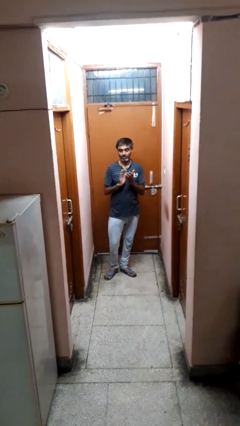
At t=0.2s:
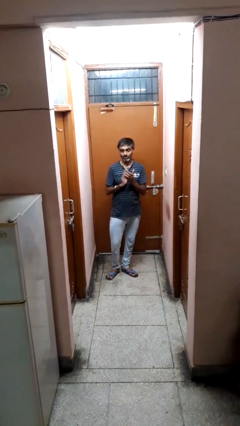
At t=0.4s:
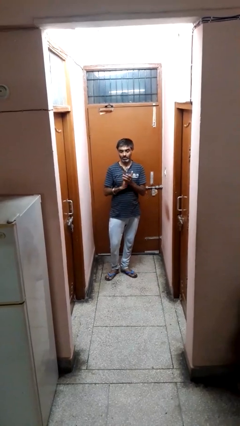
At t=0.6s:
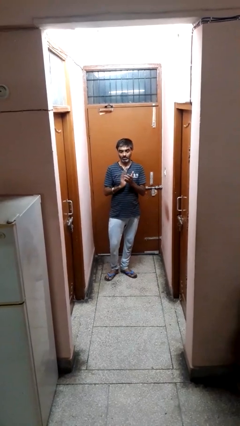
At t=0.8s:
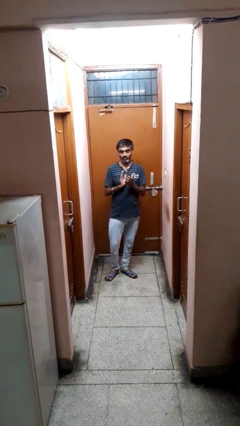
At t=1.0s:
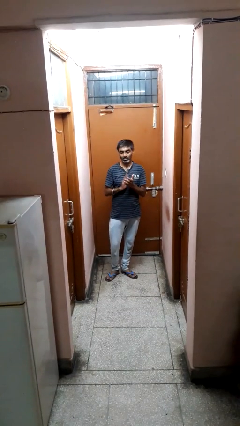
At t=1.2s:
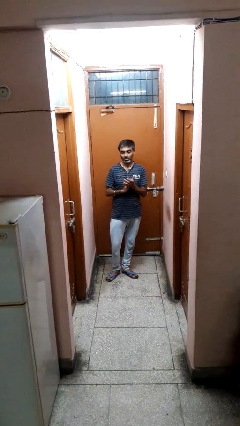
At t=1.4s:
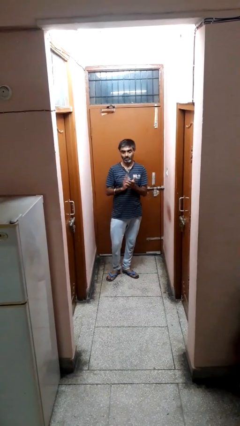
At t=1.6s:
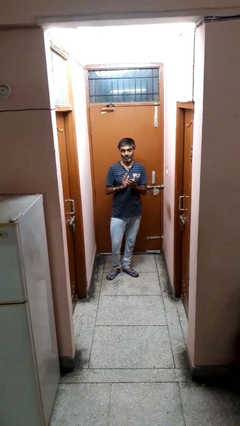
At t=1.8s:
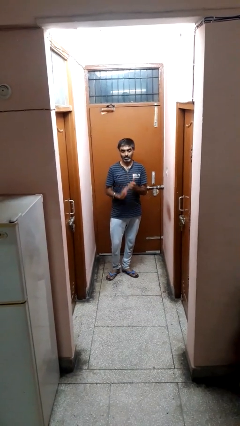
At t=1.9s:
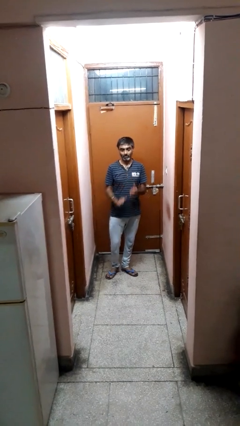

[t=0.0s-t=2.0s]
person claps hands

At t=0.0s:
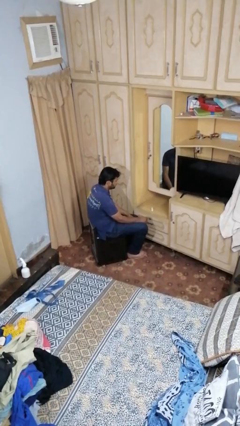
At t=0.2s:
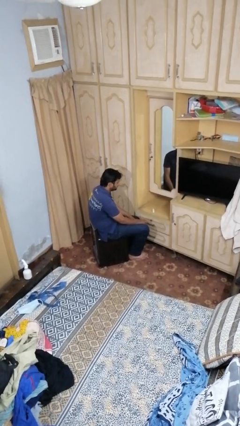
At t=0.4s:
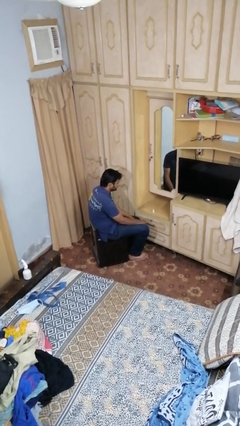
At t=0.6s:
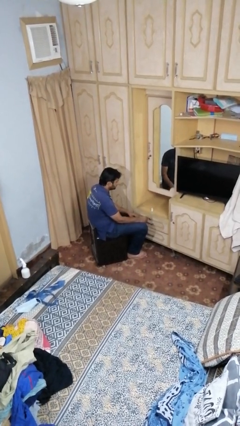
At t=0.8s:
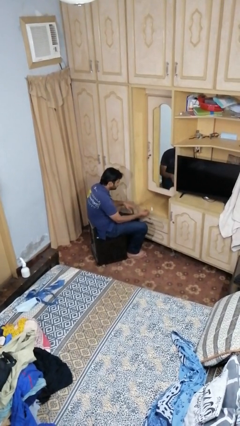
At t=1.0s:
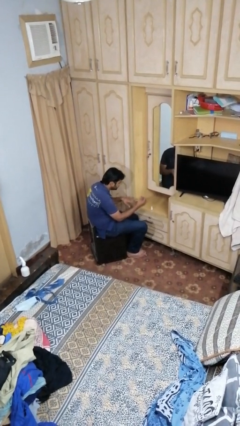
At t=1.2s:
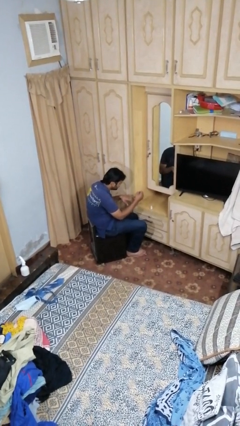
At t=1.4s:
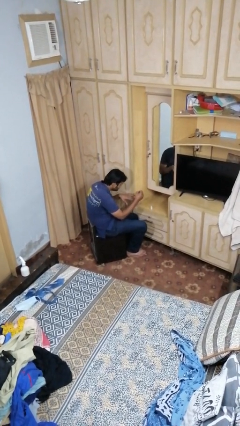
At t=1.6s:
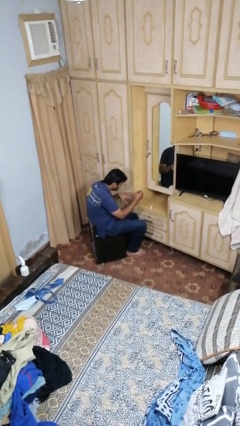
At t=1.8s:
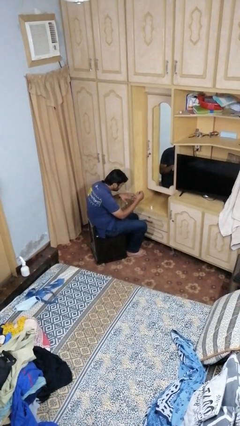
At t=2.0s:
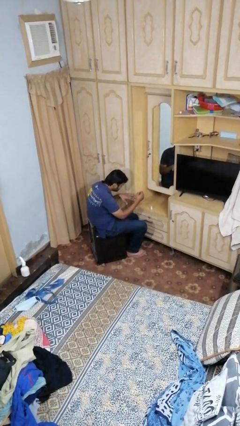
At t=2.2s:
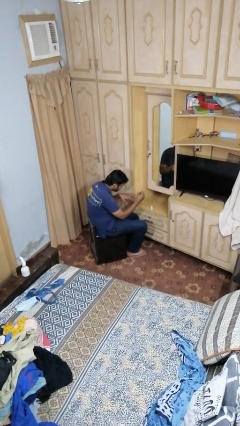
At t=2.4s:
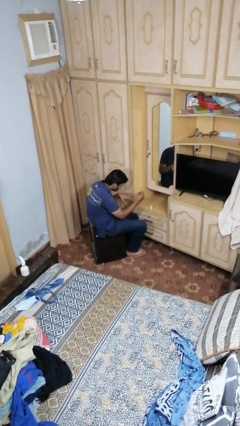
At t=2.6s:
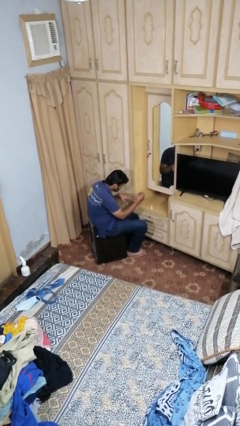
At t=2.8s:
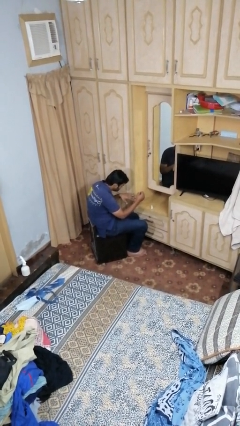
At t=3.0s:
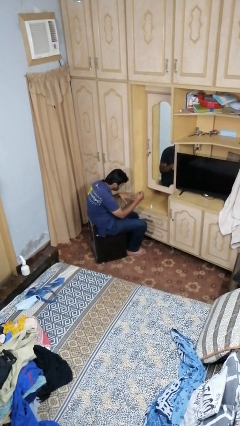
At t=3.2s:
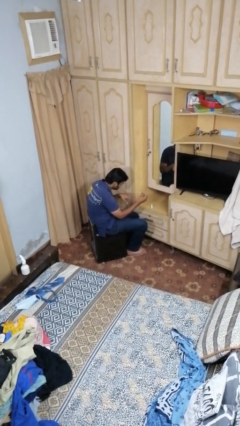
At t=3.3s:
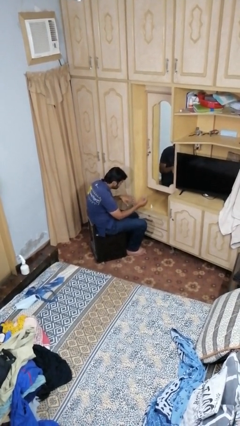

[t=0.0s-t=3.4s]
person paints fingernails

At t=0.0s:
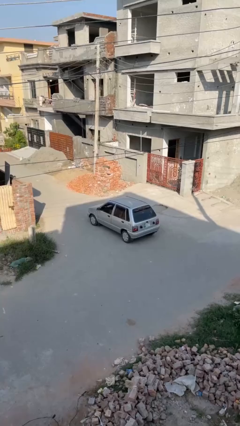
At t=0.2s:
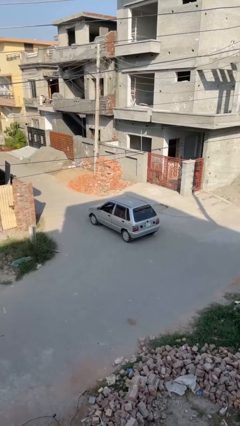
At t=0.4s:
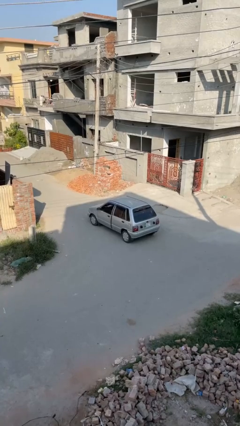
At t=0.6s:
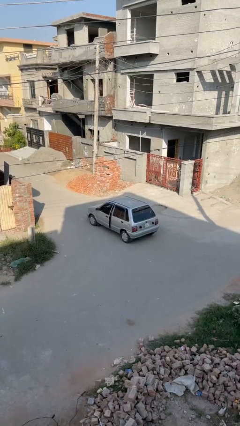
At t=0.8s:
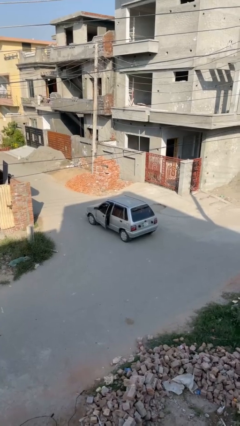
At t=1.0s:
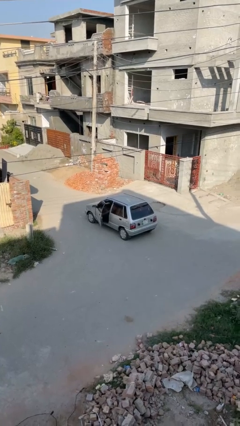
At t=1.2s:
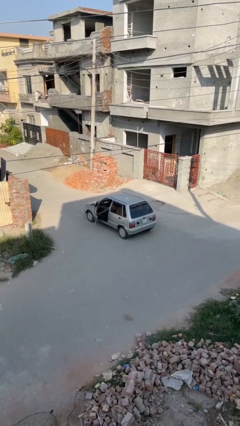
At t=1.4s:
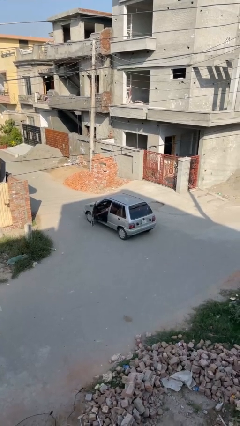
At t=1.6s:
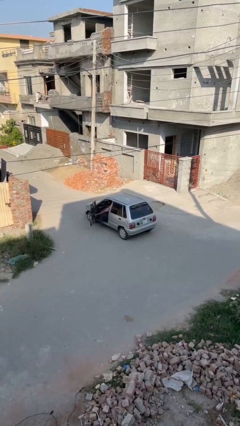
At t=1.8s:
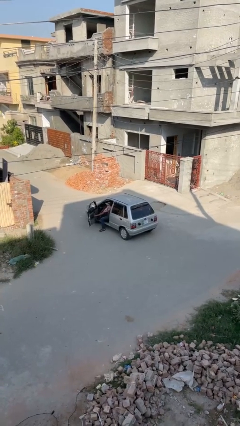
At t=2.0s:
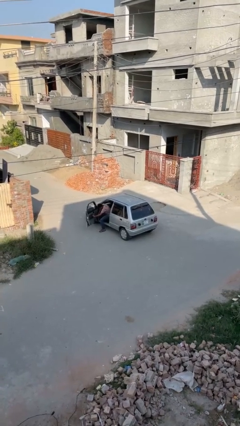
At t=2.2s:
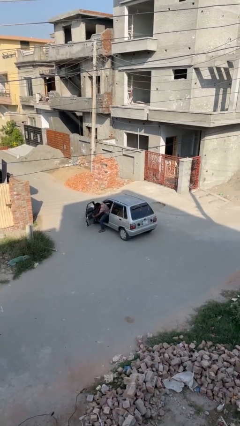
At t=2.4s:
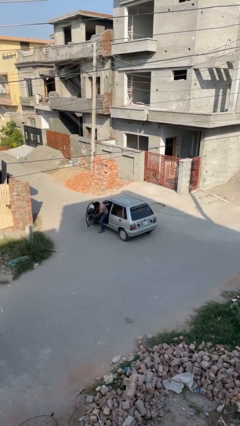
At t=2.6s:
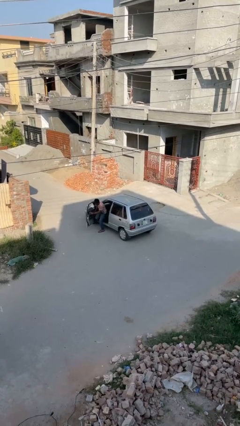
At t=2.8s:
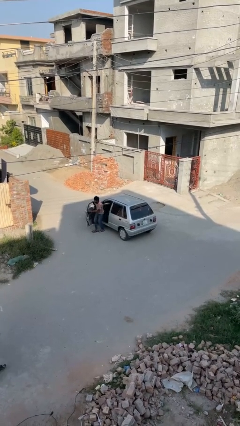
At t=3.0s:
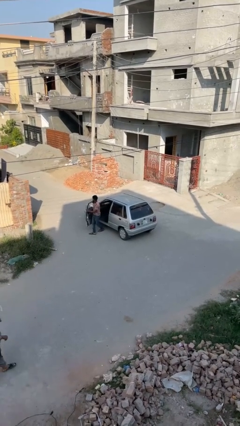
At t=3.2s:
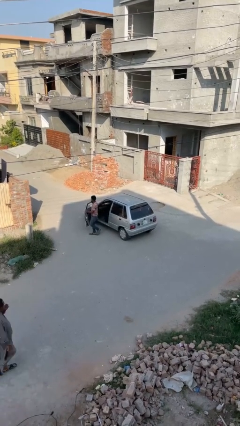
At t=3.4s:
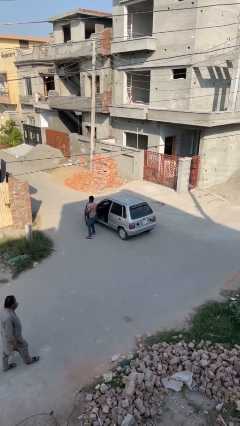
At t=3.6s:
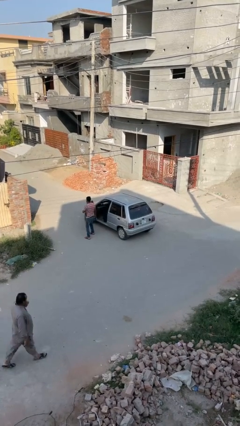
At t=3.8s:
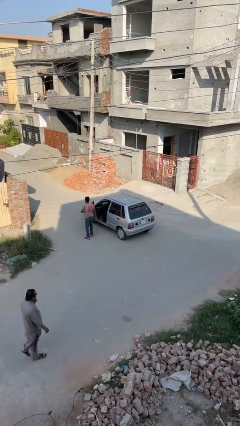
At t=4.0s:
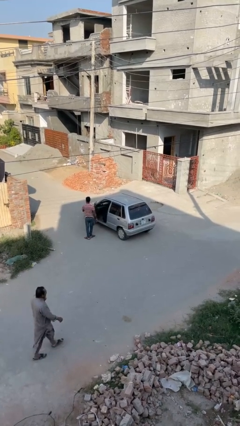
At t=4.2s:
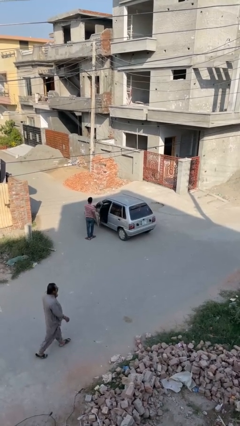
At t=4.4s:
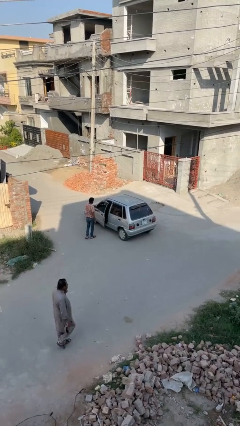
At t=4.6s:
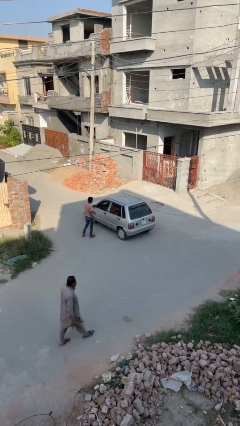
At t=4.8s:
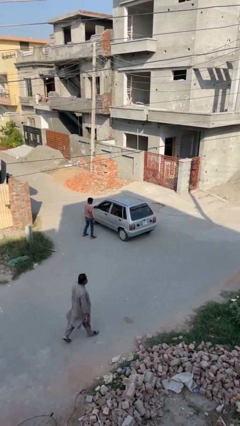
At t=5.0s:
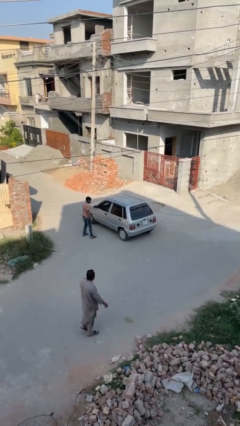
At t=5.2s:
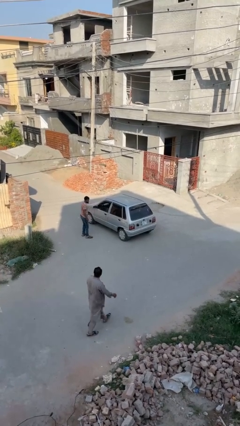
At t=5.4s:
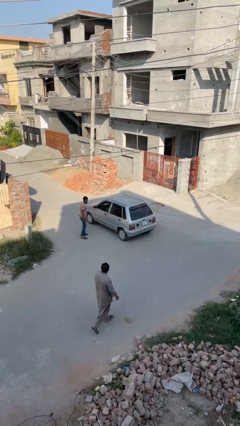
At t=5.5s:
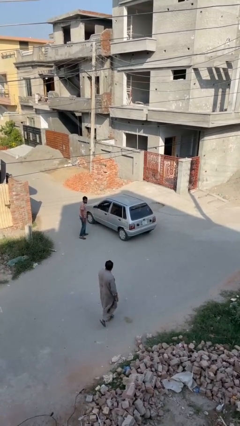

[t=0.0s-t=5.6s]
car drops off person

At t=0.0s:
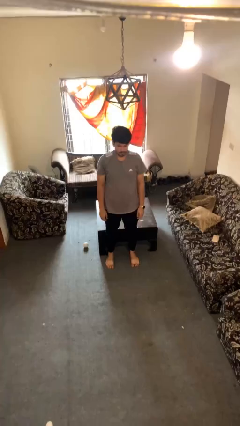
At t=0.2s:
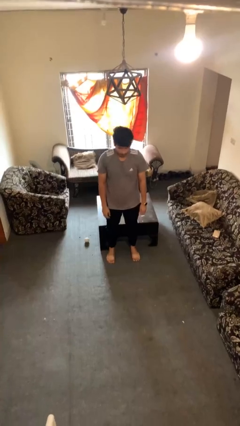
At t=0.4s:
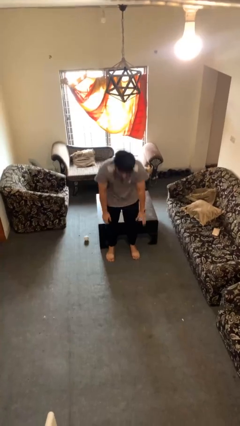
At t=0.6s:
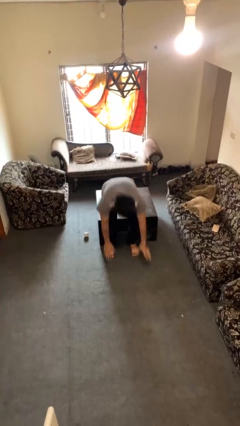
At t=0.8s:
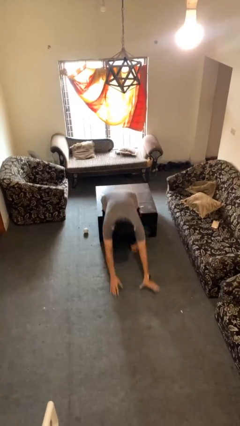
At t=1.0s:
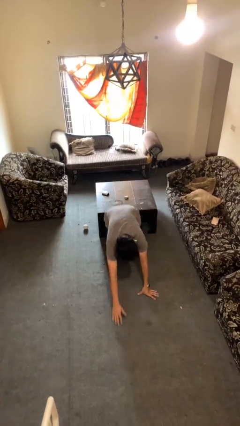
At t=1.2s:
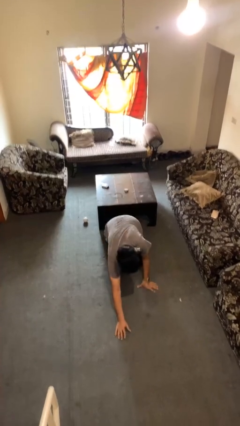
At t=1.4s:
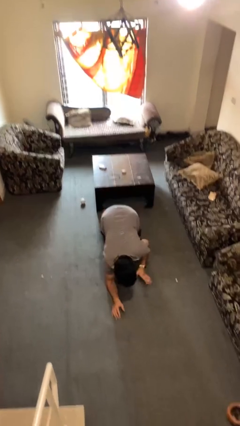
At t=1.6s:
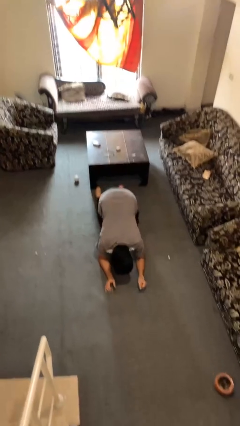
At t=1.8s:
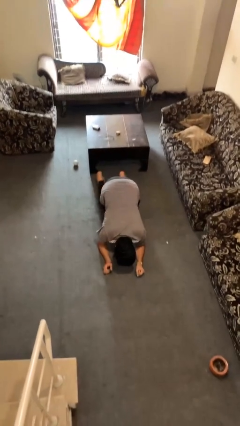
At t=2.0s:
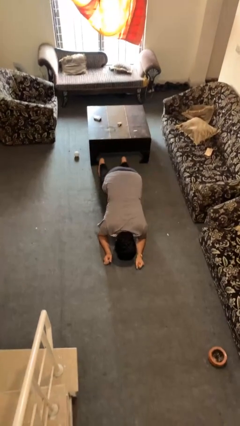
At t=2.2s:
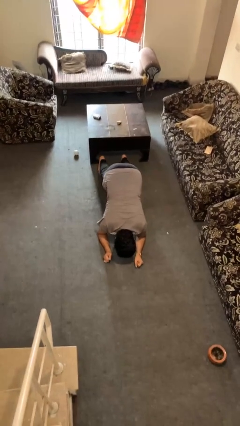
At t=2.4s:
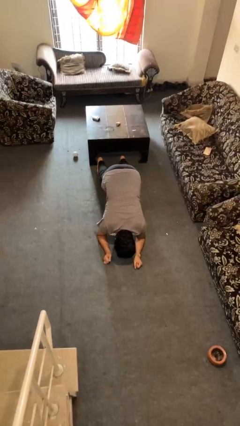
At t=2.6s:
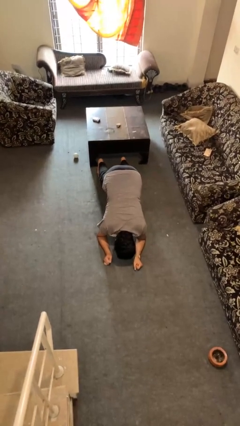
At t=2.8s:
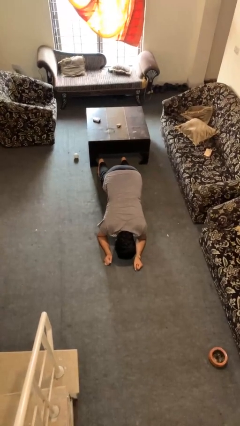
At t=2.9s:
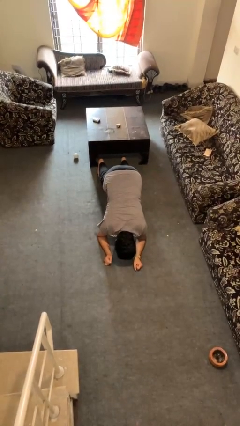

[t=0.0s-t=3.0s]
person exercises with plank

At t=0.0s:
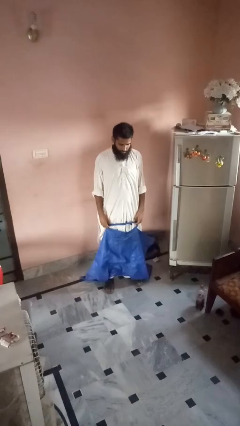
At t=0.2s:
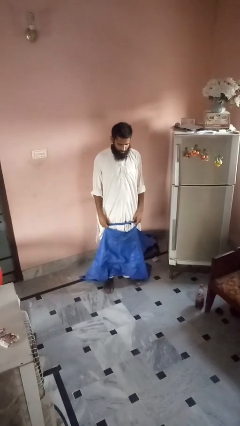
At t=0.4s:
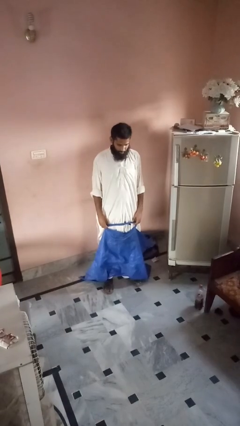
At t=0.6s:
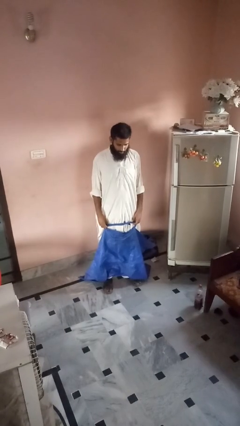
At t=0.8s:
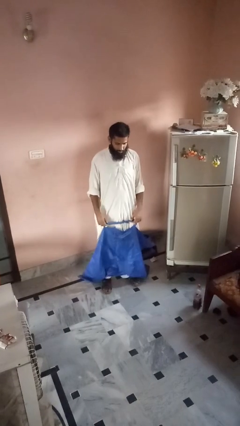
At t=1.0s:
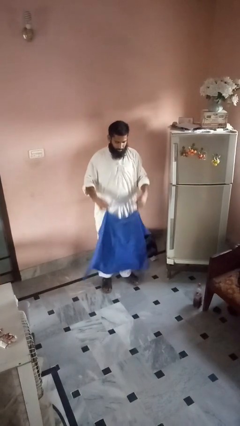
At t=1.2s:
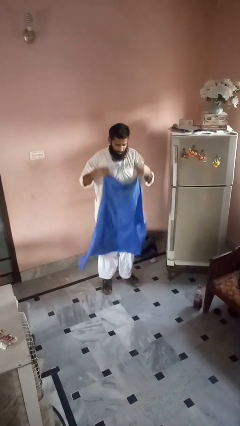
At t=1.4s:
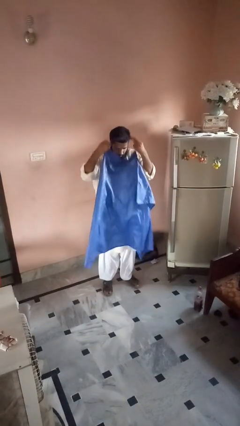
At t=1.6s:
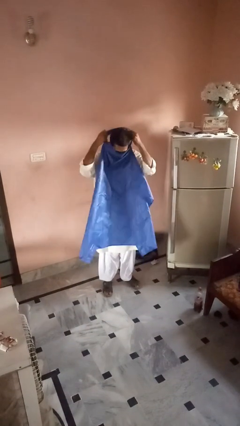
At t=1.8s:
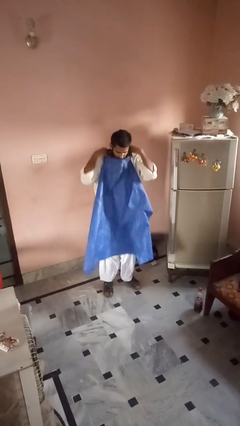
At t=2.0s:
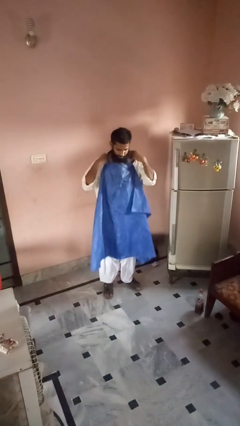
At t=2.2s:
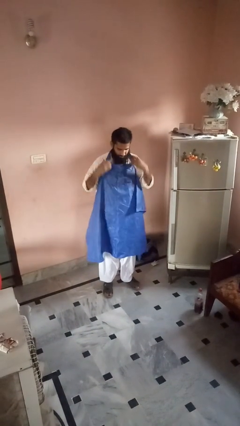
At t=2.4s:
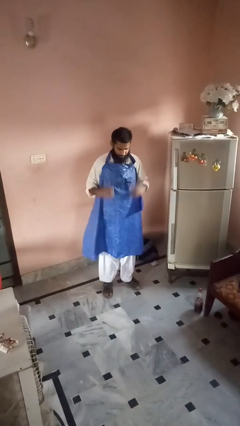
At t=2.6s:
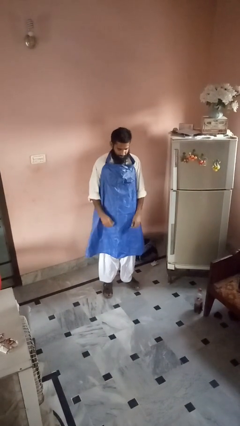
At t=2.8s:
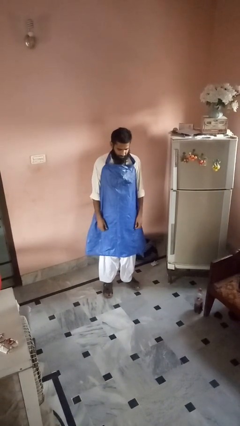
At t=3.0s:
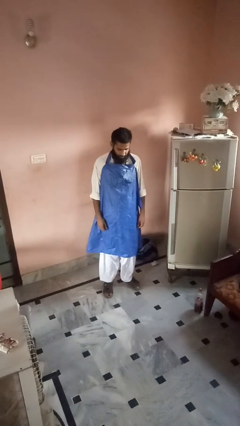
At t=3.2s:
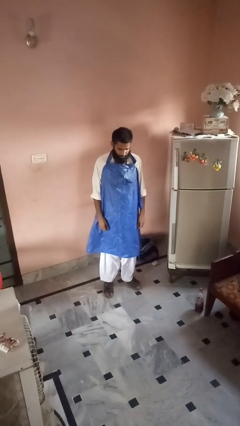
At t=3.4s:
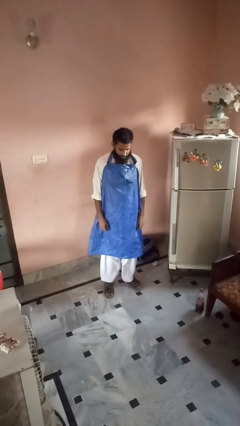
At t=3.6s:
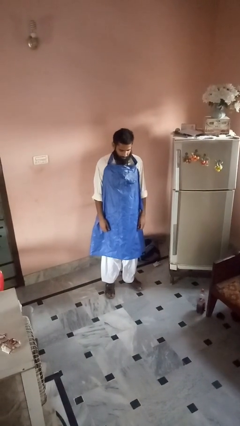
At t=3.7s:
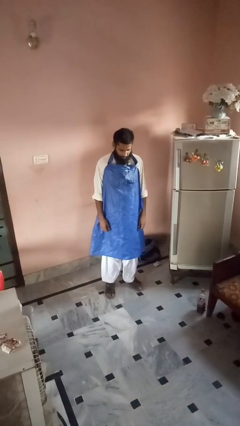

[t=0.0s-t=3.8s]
person puts on apron
